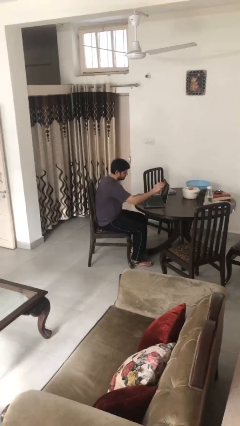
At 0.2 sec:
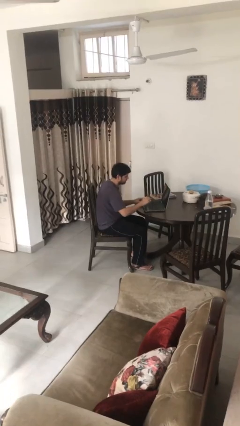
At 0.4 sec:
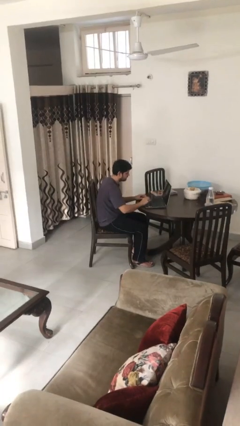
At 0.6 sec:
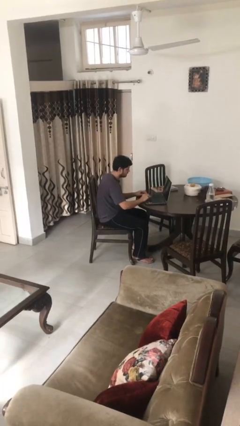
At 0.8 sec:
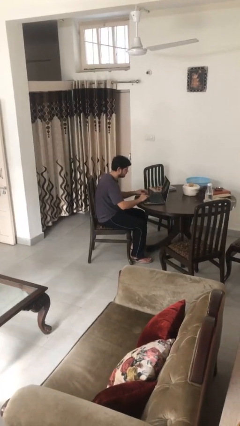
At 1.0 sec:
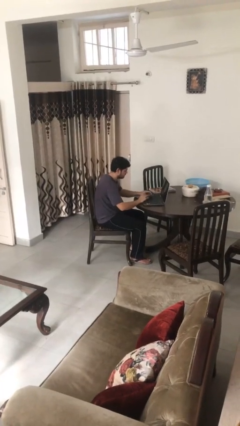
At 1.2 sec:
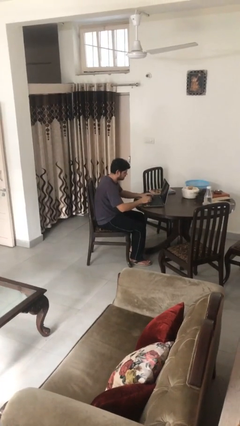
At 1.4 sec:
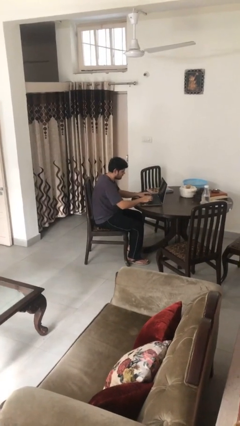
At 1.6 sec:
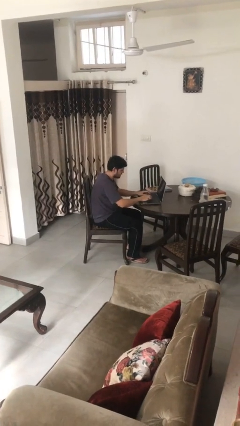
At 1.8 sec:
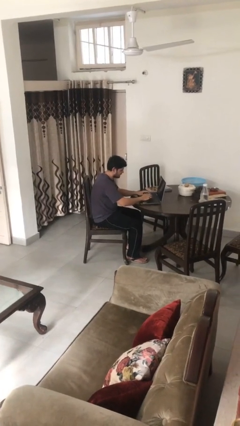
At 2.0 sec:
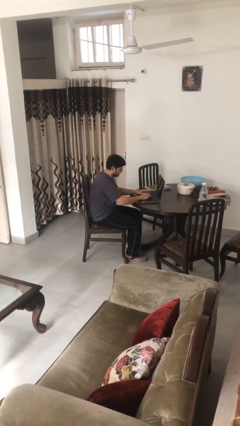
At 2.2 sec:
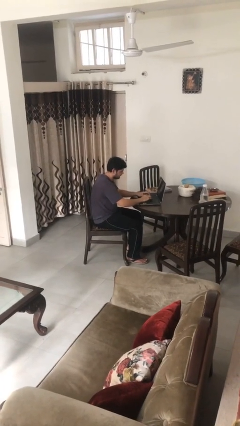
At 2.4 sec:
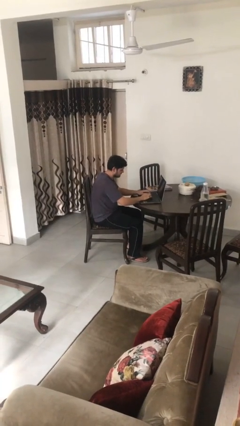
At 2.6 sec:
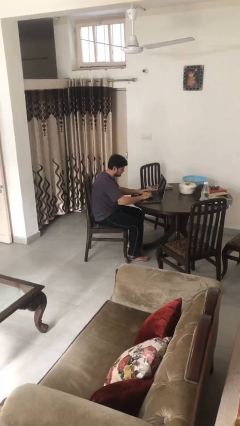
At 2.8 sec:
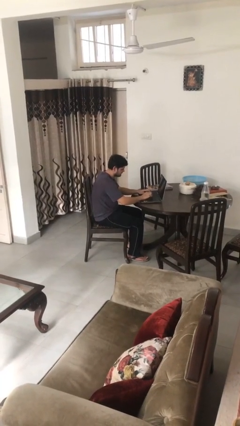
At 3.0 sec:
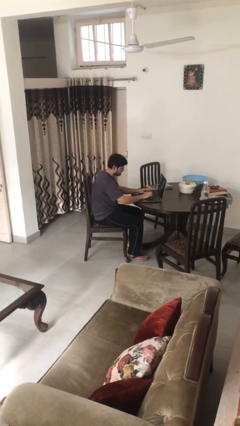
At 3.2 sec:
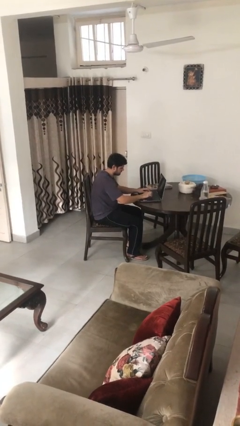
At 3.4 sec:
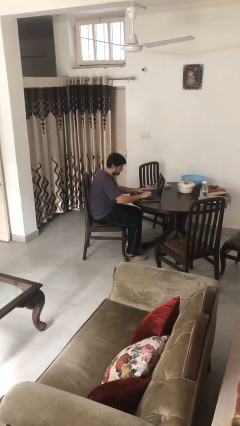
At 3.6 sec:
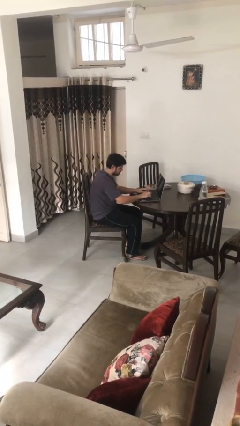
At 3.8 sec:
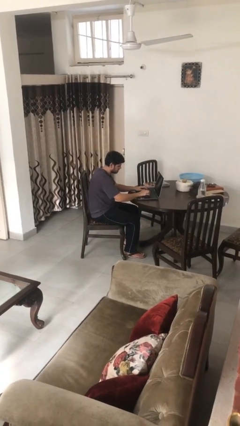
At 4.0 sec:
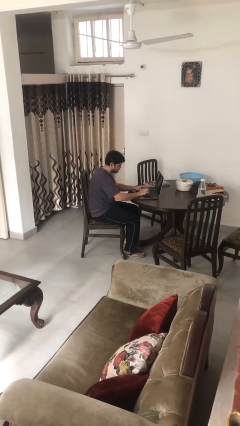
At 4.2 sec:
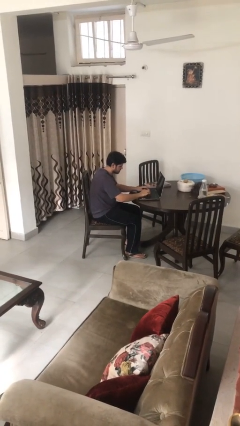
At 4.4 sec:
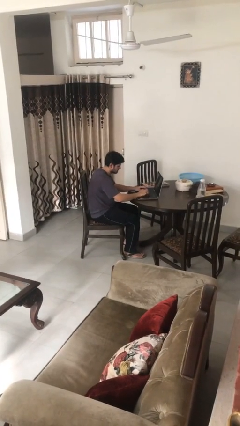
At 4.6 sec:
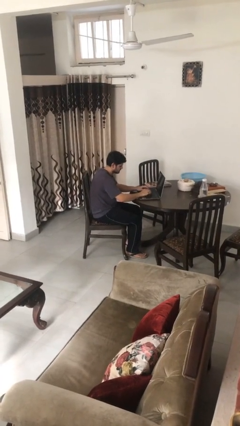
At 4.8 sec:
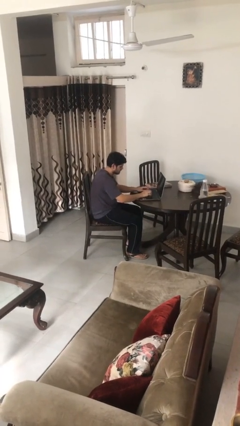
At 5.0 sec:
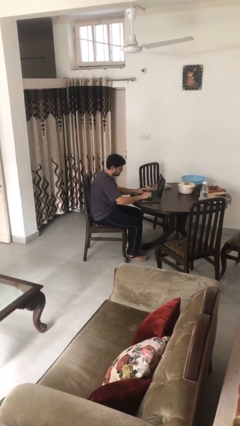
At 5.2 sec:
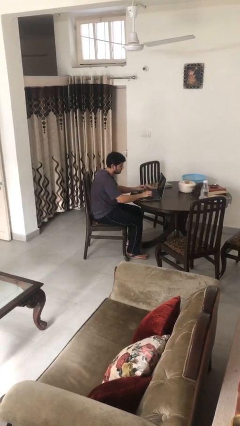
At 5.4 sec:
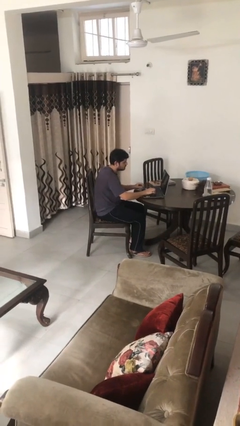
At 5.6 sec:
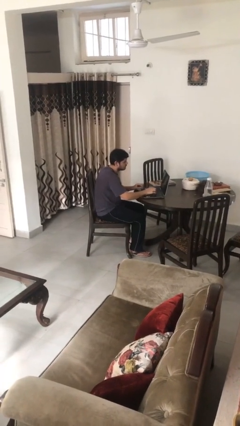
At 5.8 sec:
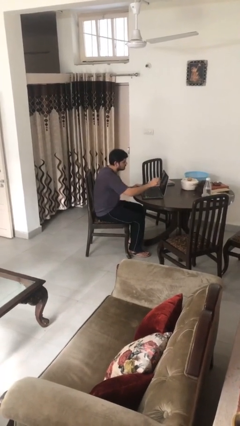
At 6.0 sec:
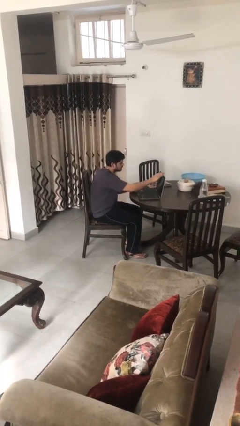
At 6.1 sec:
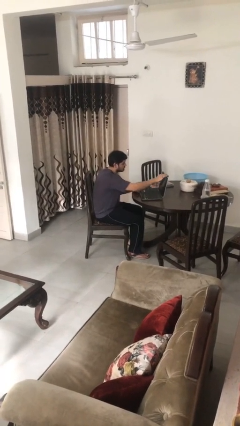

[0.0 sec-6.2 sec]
person interacts with laptop

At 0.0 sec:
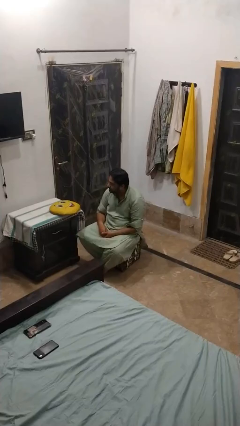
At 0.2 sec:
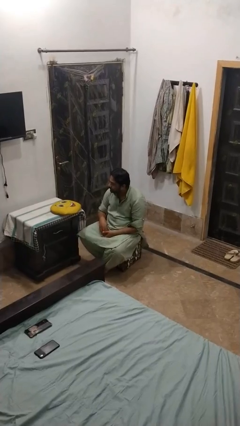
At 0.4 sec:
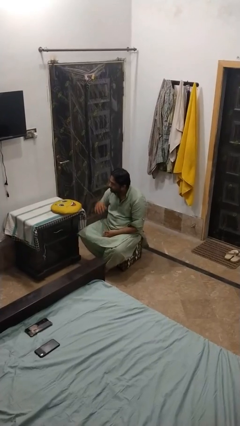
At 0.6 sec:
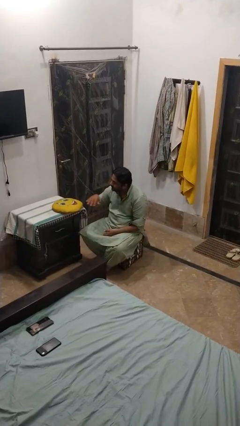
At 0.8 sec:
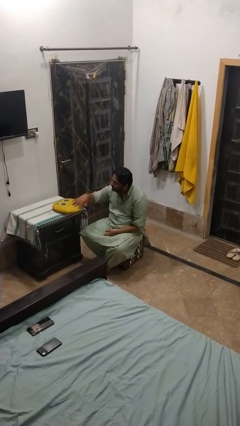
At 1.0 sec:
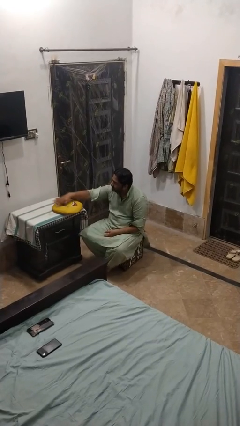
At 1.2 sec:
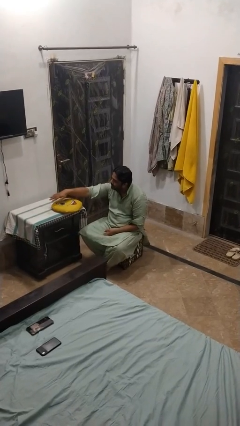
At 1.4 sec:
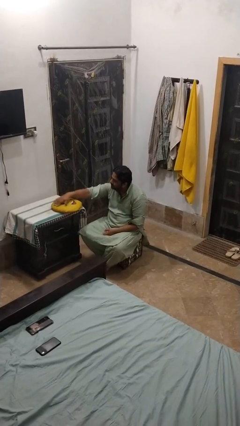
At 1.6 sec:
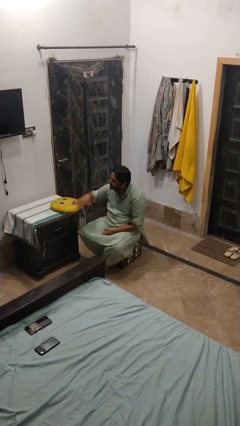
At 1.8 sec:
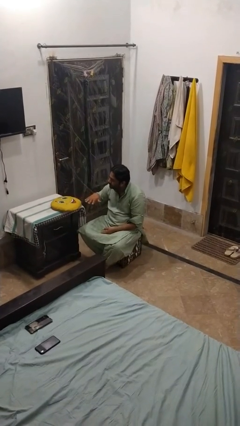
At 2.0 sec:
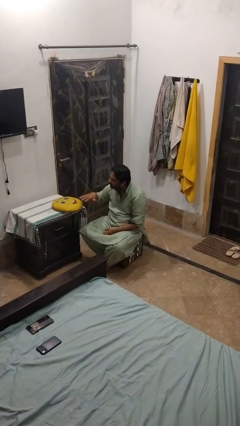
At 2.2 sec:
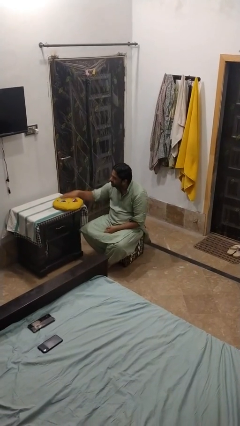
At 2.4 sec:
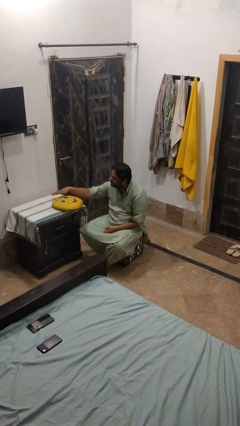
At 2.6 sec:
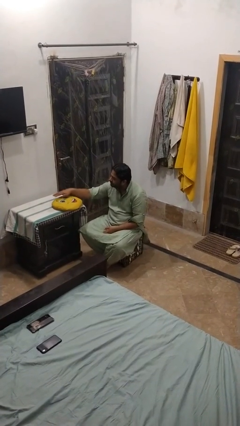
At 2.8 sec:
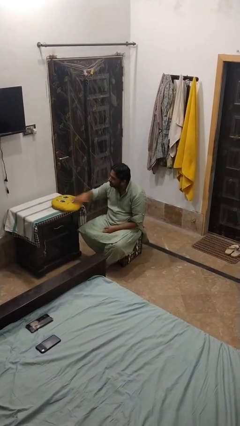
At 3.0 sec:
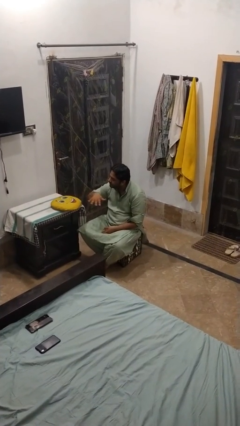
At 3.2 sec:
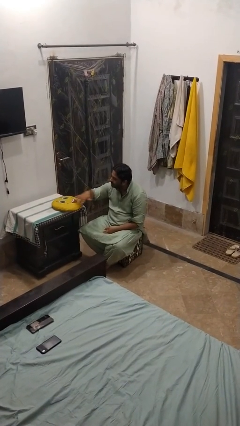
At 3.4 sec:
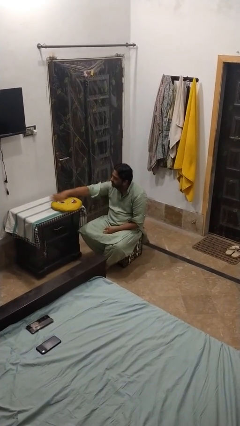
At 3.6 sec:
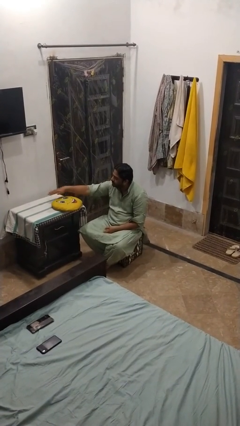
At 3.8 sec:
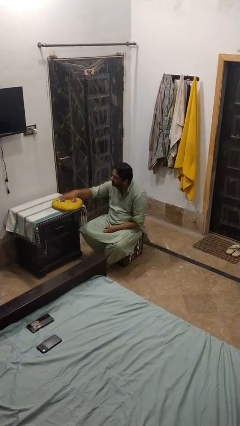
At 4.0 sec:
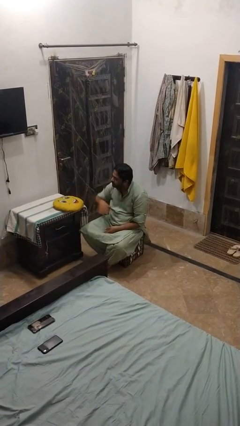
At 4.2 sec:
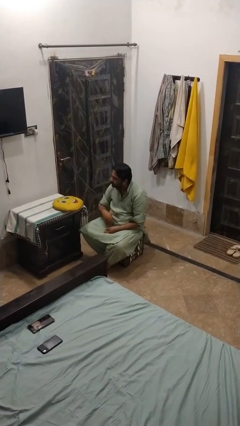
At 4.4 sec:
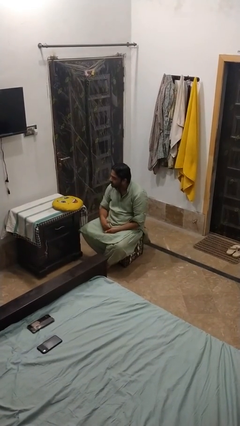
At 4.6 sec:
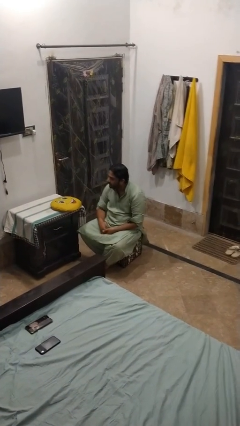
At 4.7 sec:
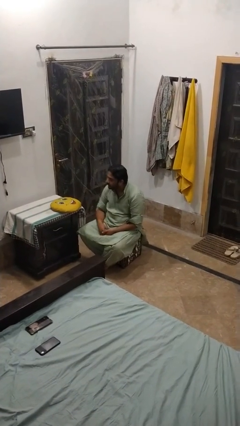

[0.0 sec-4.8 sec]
person waves hand over object

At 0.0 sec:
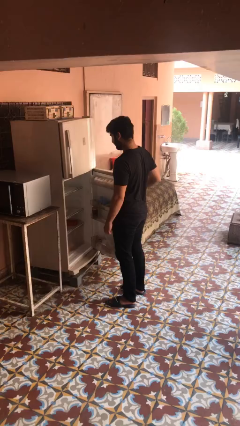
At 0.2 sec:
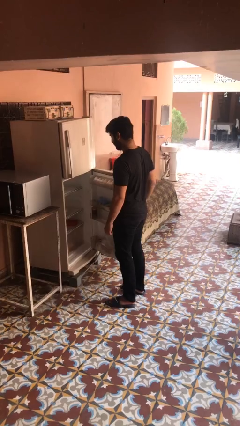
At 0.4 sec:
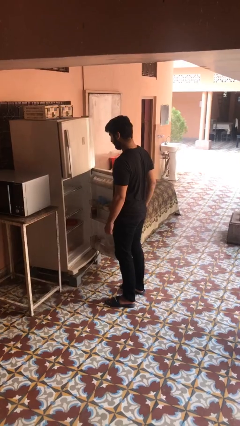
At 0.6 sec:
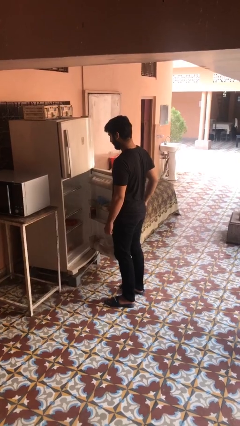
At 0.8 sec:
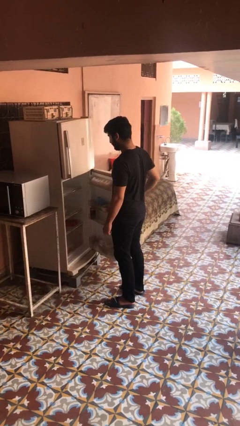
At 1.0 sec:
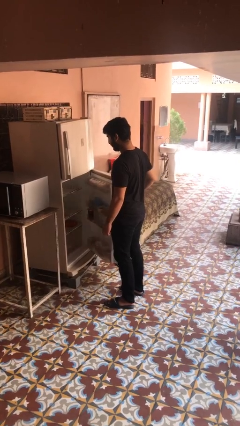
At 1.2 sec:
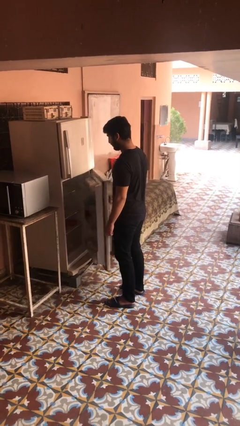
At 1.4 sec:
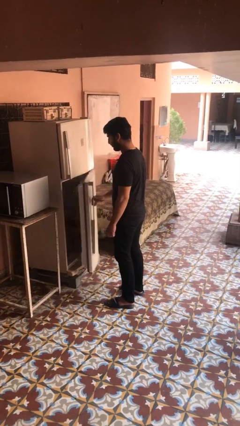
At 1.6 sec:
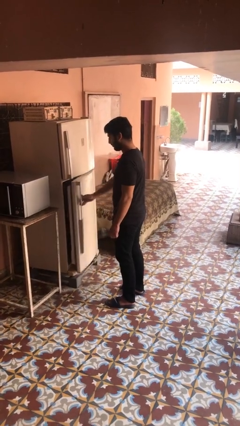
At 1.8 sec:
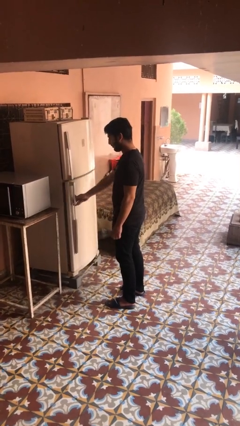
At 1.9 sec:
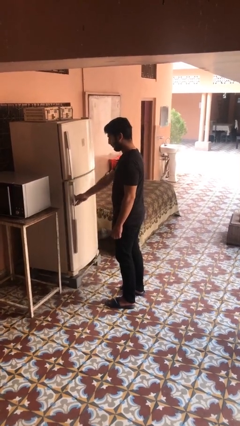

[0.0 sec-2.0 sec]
person closes refrigerator

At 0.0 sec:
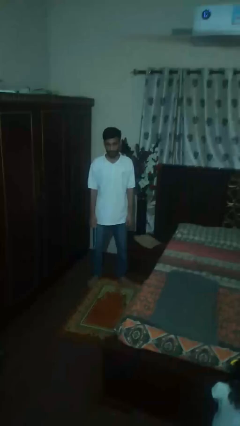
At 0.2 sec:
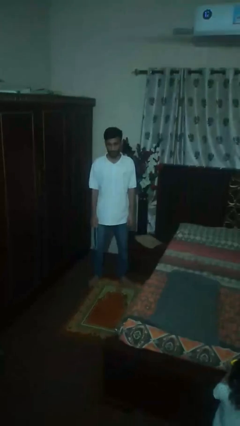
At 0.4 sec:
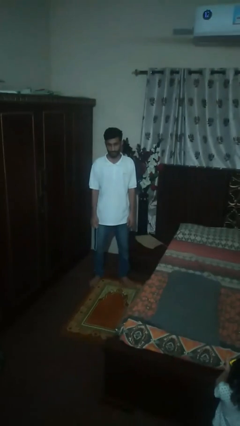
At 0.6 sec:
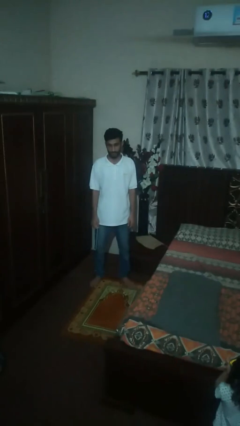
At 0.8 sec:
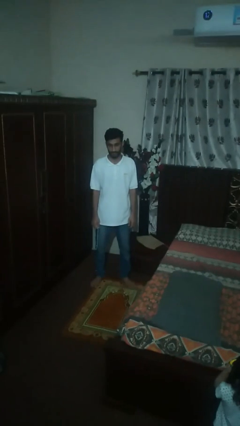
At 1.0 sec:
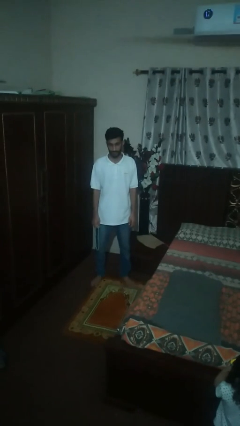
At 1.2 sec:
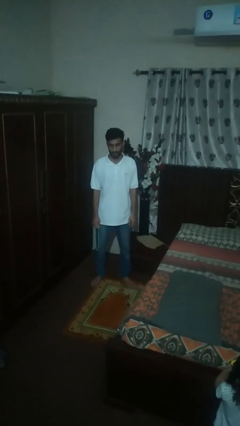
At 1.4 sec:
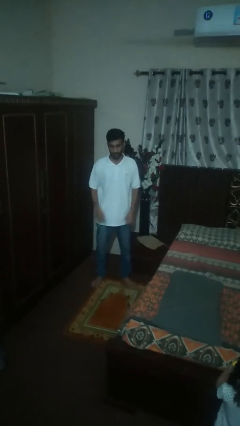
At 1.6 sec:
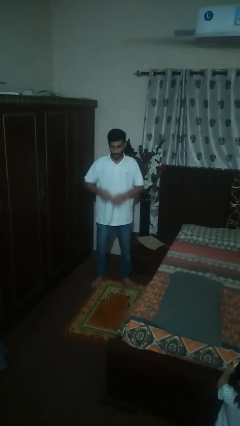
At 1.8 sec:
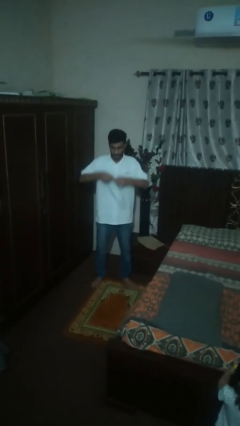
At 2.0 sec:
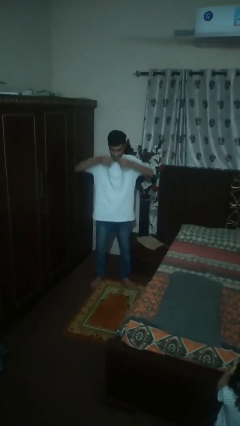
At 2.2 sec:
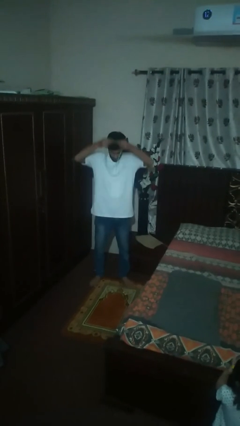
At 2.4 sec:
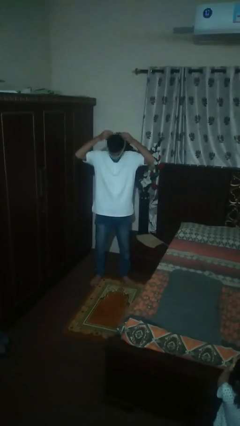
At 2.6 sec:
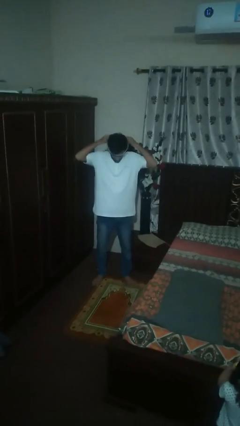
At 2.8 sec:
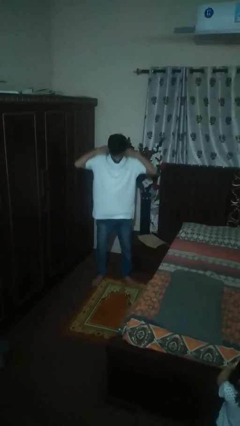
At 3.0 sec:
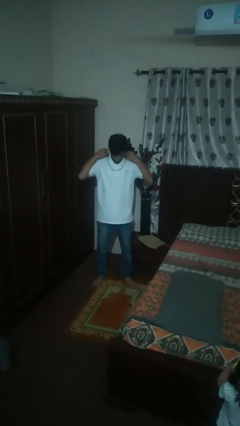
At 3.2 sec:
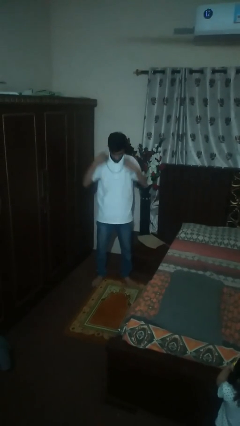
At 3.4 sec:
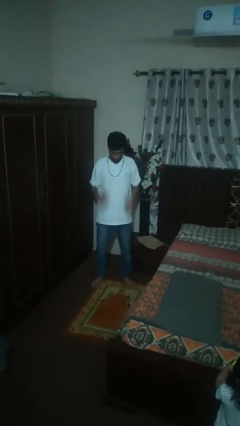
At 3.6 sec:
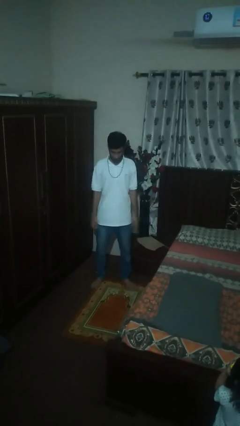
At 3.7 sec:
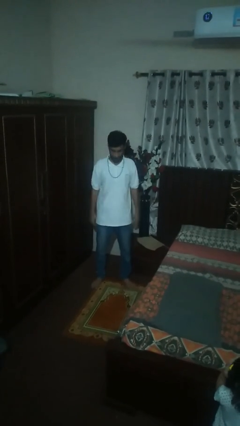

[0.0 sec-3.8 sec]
person puts on necklace

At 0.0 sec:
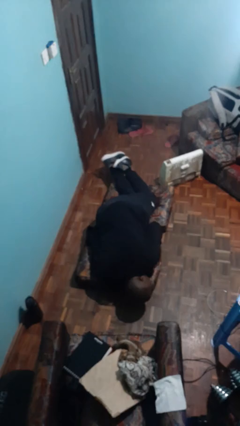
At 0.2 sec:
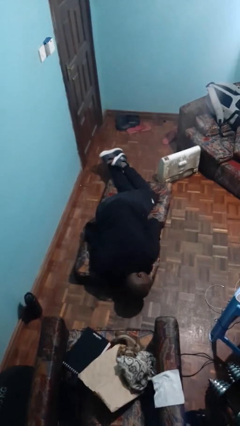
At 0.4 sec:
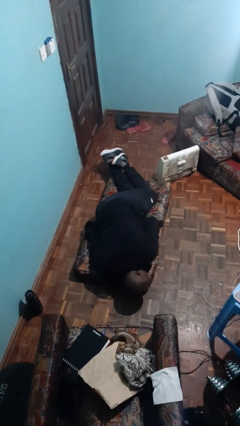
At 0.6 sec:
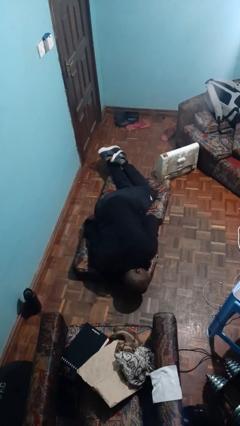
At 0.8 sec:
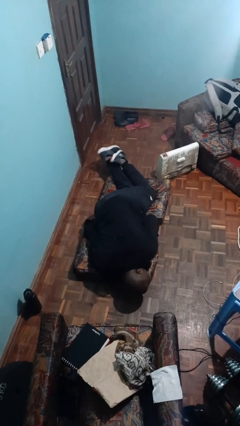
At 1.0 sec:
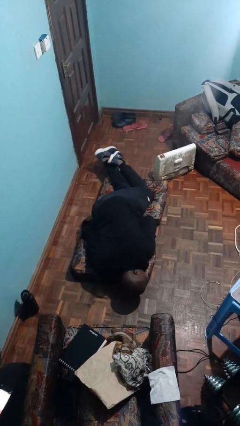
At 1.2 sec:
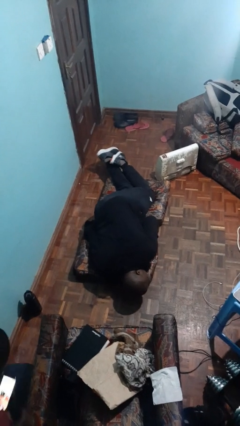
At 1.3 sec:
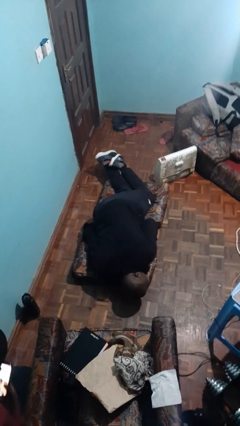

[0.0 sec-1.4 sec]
person lies down on floor
